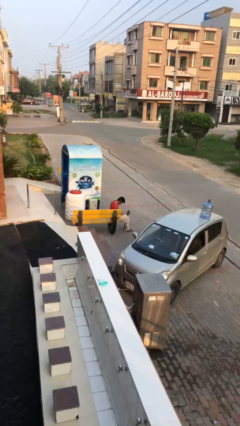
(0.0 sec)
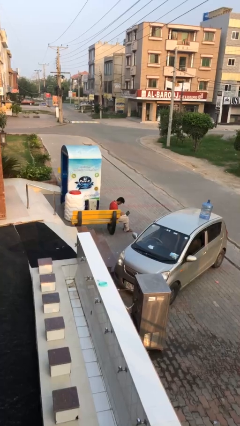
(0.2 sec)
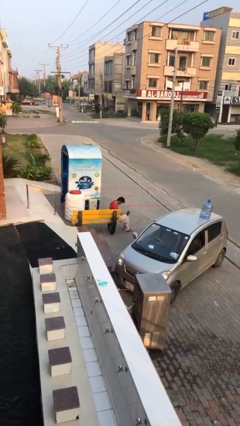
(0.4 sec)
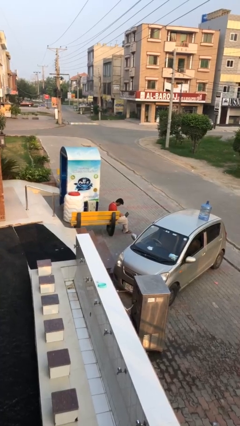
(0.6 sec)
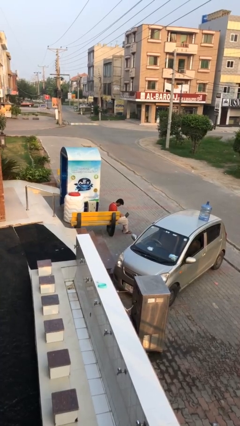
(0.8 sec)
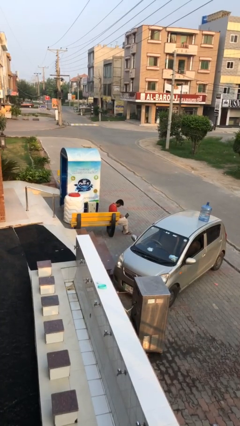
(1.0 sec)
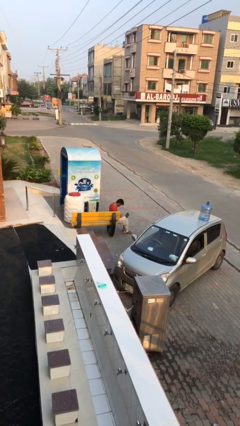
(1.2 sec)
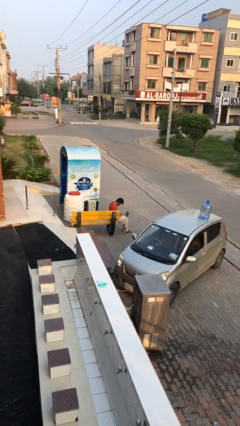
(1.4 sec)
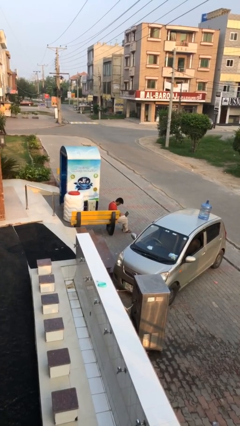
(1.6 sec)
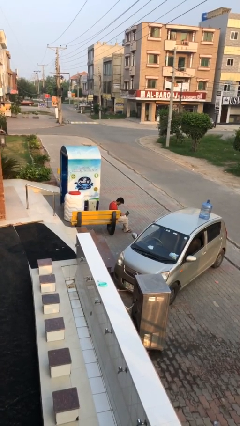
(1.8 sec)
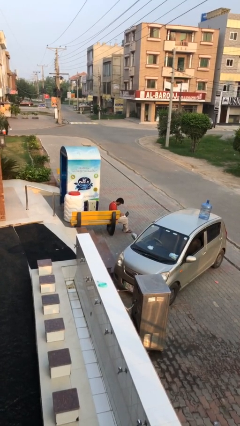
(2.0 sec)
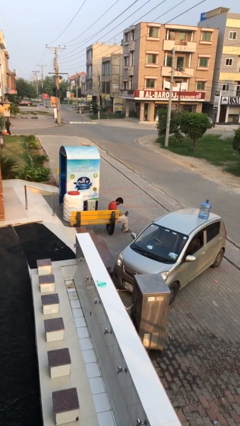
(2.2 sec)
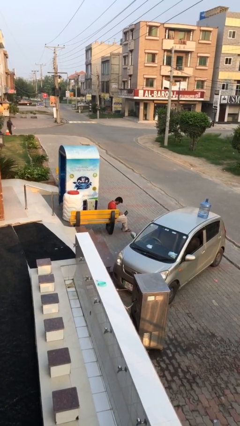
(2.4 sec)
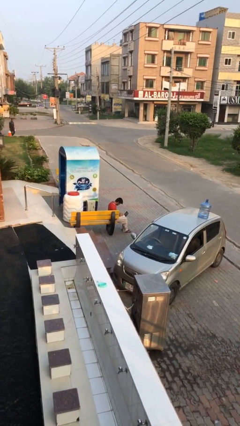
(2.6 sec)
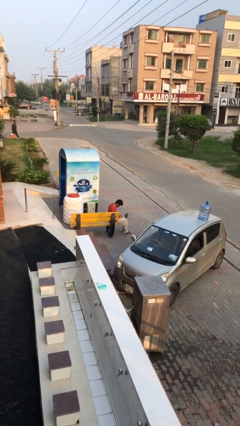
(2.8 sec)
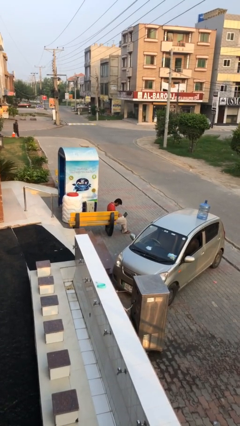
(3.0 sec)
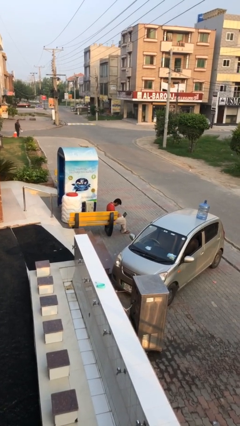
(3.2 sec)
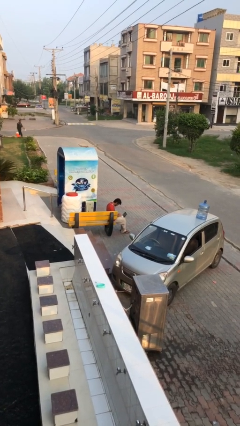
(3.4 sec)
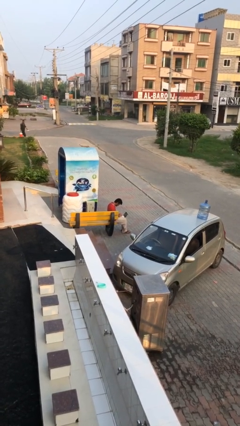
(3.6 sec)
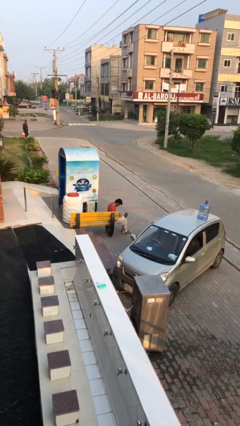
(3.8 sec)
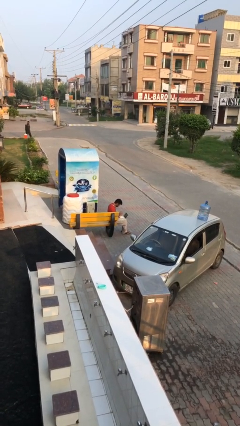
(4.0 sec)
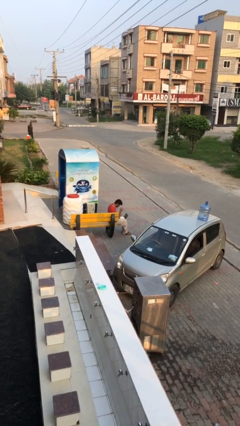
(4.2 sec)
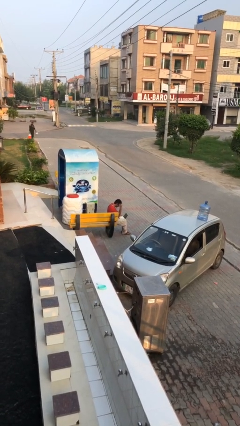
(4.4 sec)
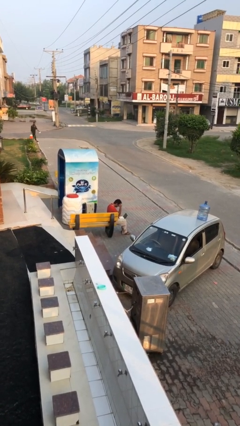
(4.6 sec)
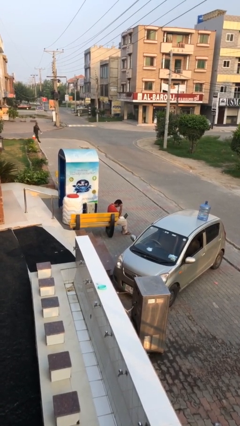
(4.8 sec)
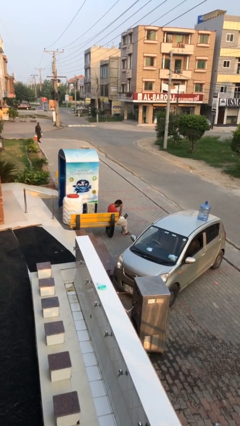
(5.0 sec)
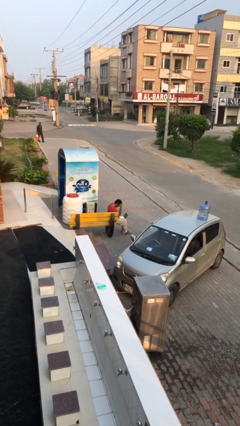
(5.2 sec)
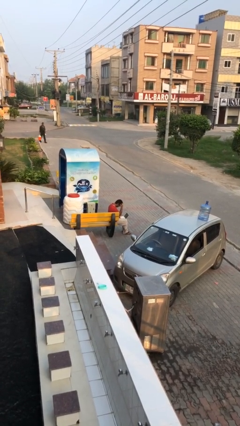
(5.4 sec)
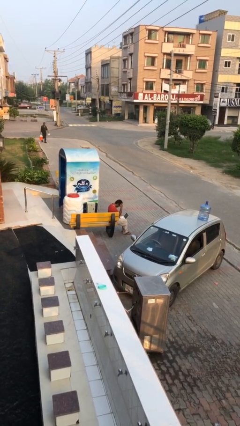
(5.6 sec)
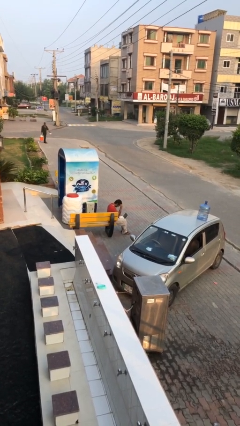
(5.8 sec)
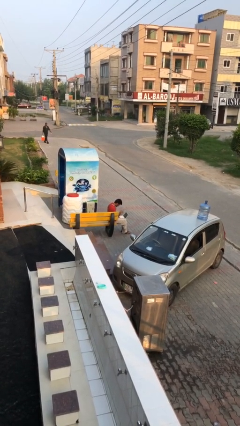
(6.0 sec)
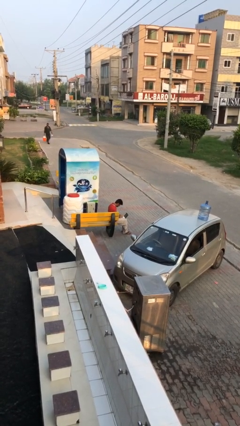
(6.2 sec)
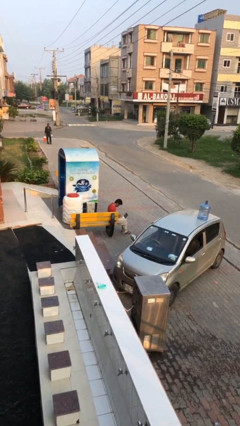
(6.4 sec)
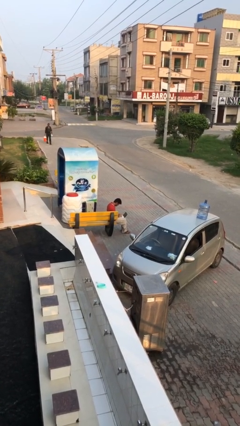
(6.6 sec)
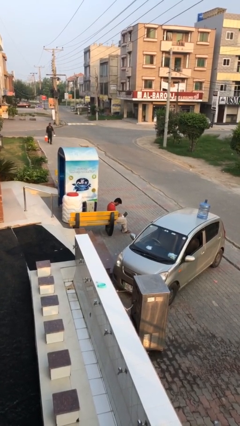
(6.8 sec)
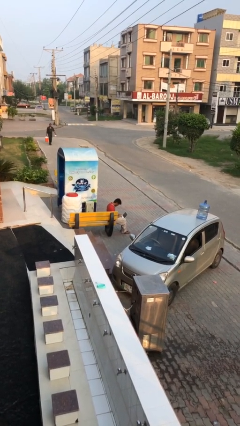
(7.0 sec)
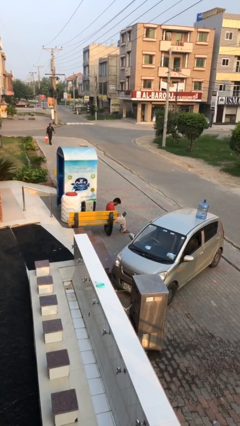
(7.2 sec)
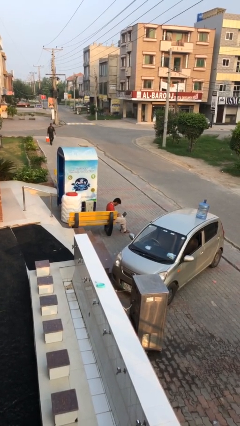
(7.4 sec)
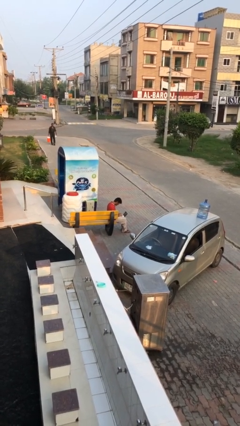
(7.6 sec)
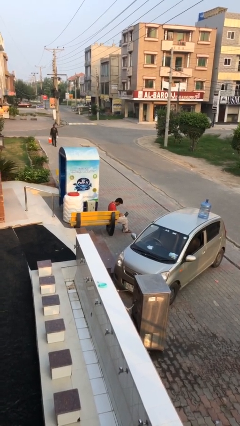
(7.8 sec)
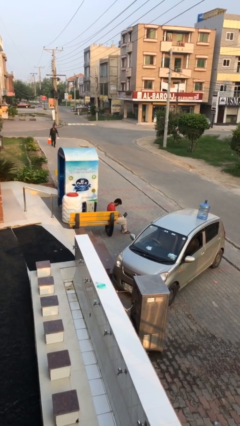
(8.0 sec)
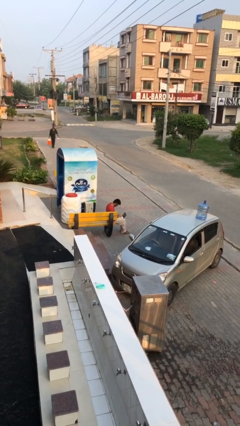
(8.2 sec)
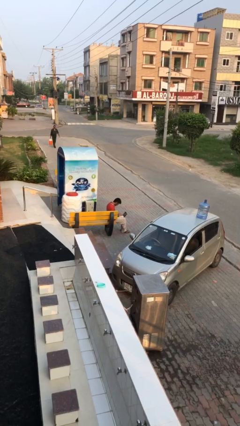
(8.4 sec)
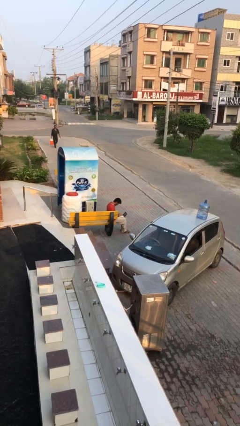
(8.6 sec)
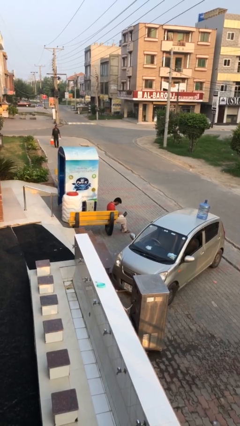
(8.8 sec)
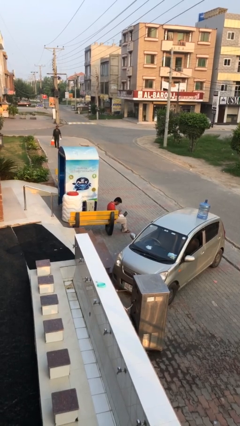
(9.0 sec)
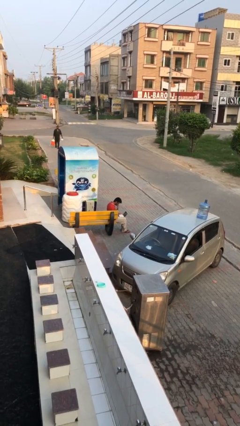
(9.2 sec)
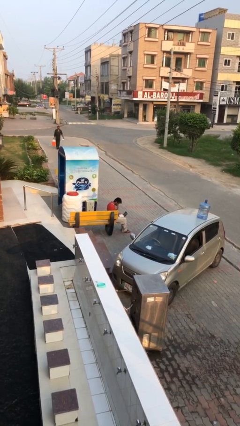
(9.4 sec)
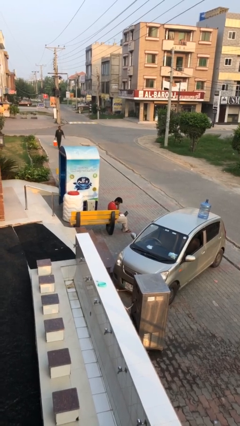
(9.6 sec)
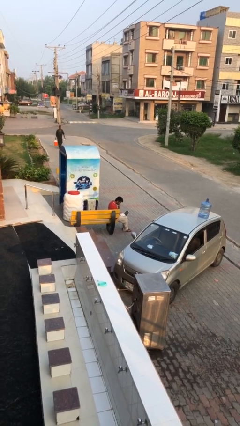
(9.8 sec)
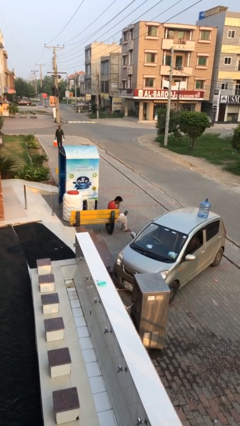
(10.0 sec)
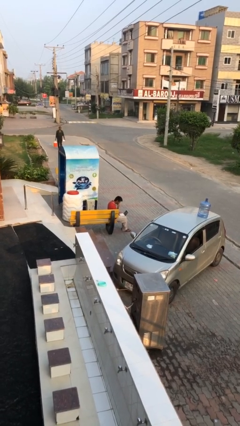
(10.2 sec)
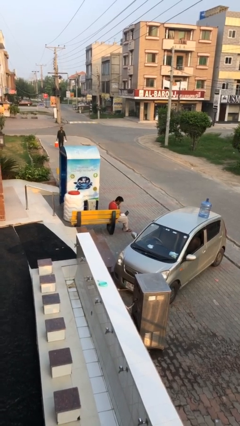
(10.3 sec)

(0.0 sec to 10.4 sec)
person interacts with laptop

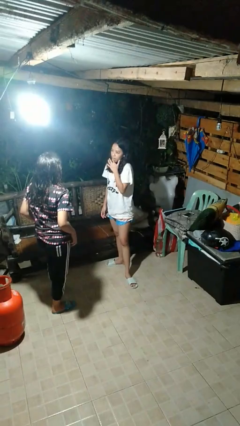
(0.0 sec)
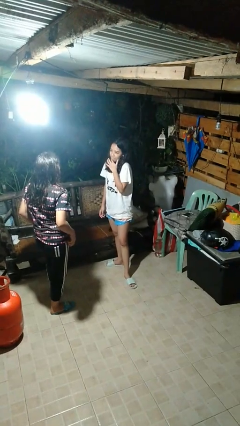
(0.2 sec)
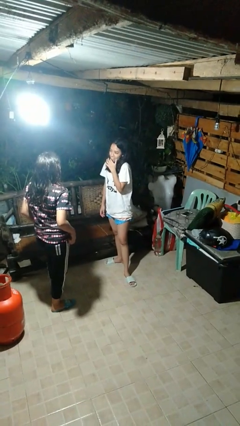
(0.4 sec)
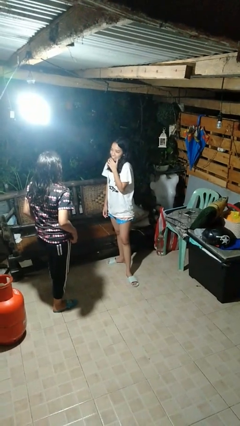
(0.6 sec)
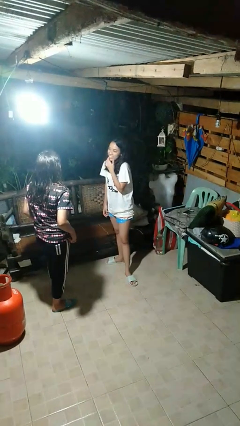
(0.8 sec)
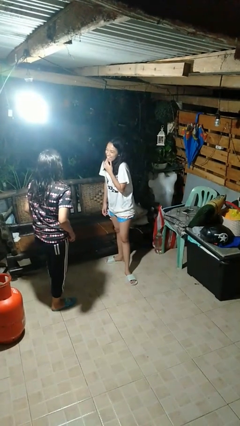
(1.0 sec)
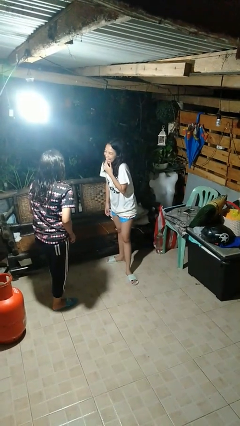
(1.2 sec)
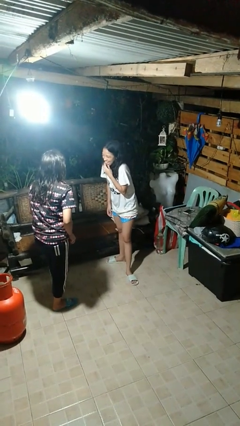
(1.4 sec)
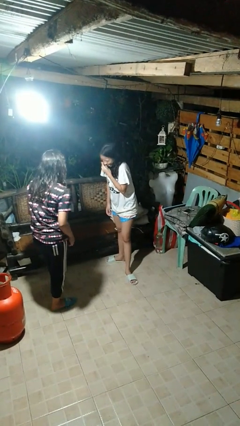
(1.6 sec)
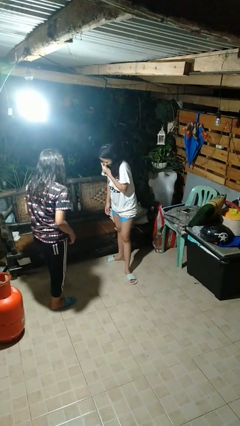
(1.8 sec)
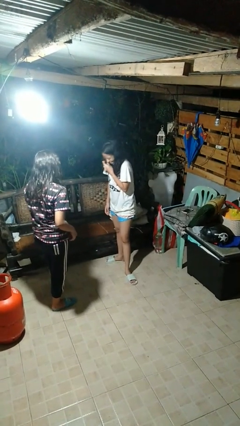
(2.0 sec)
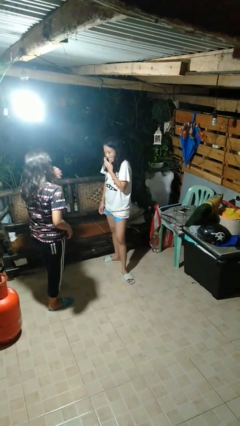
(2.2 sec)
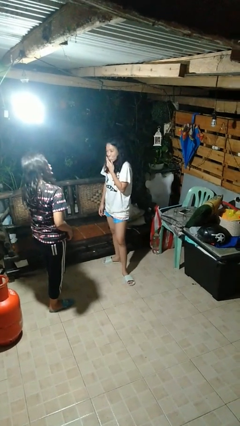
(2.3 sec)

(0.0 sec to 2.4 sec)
person laughs with person

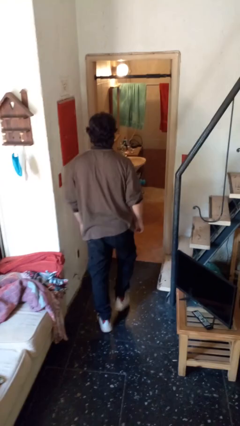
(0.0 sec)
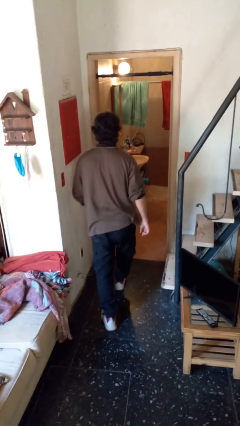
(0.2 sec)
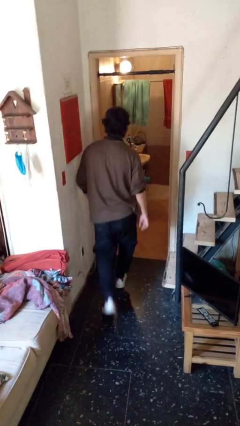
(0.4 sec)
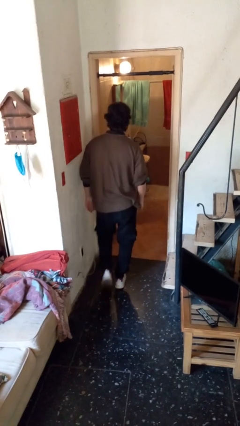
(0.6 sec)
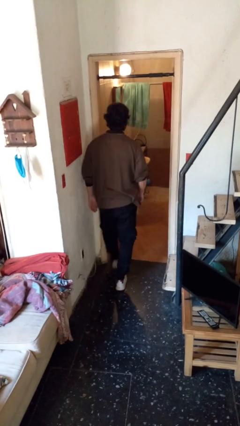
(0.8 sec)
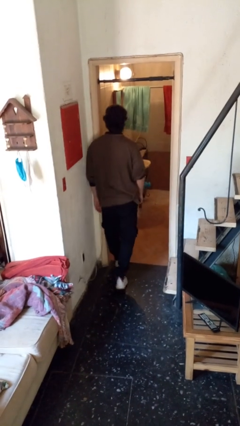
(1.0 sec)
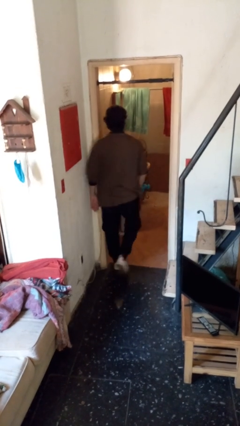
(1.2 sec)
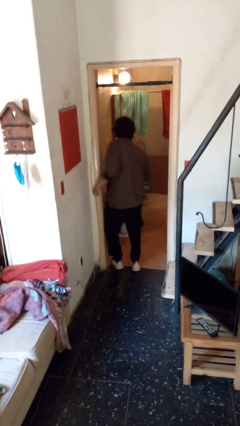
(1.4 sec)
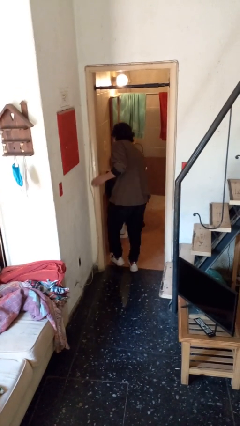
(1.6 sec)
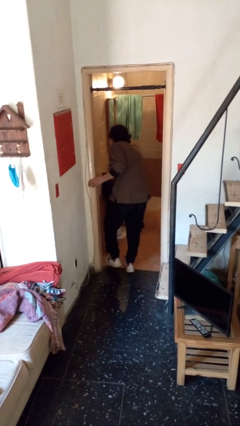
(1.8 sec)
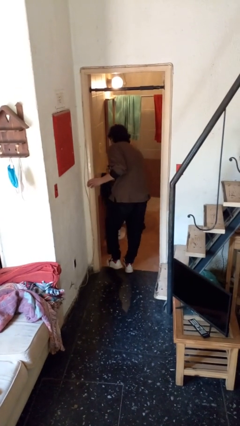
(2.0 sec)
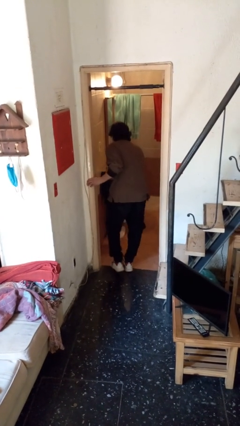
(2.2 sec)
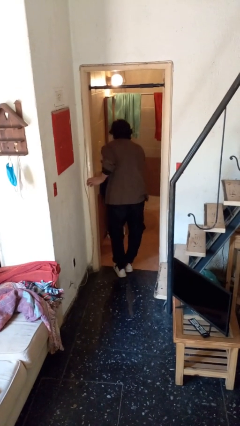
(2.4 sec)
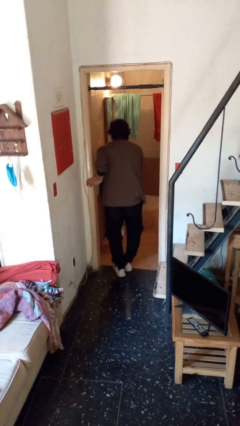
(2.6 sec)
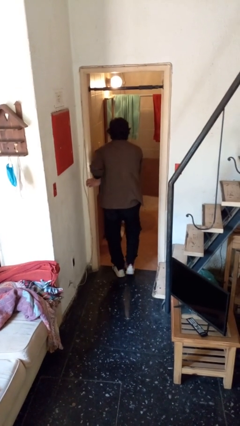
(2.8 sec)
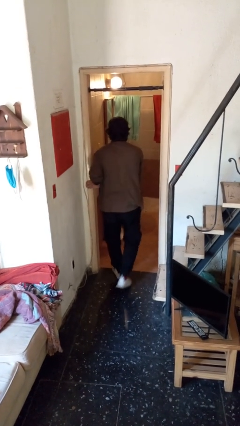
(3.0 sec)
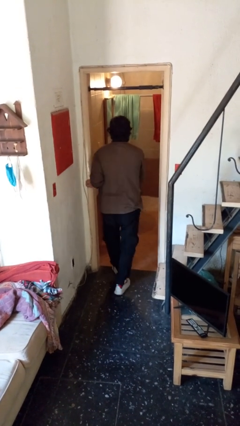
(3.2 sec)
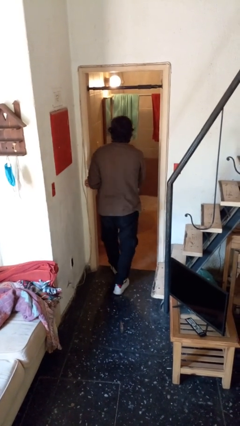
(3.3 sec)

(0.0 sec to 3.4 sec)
person bumps into wall

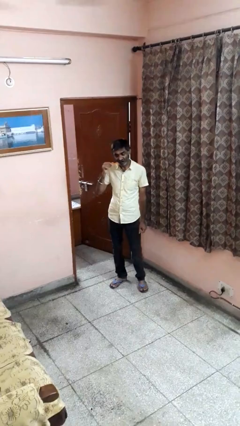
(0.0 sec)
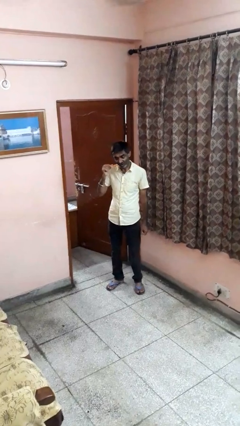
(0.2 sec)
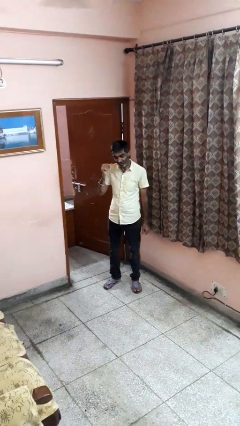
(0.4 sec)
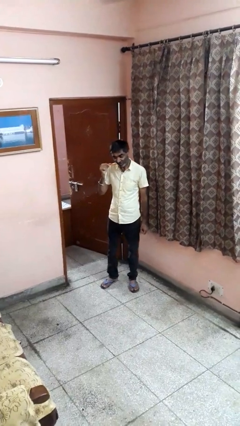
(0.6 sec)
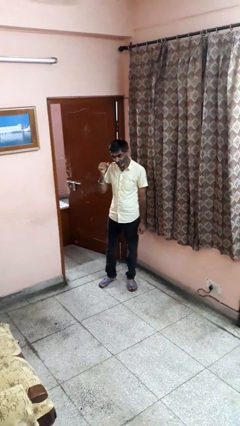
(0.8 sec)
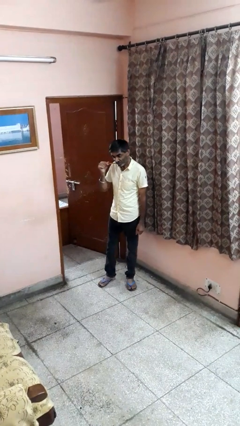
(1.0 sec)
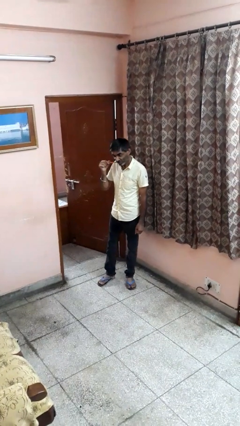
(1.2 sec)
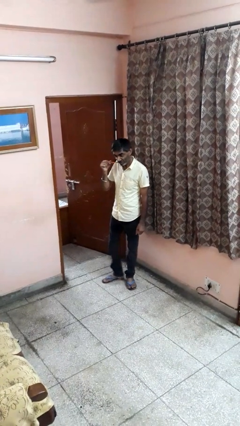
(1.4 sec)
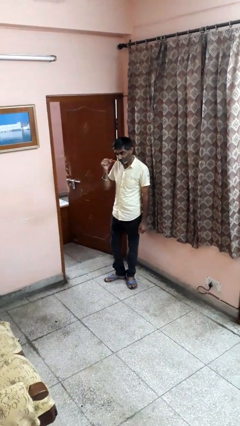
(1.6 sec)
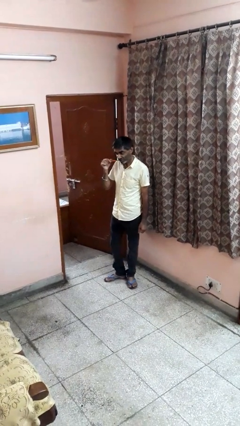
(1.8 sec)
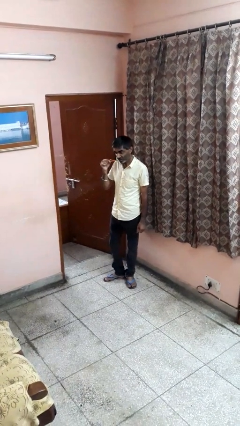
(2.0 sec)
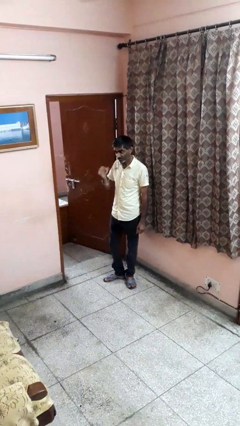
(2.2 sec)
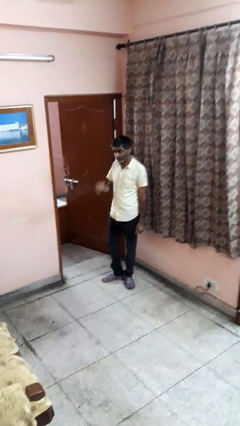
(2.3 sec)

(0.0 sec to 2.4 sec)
person brushes teeth
